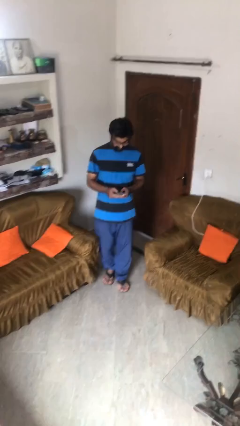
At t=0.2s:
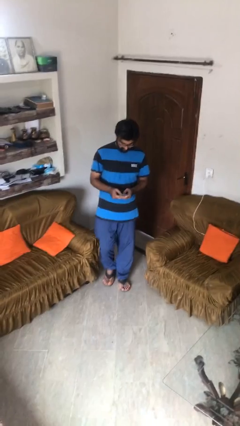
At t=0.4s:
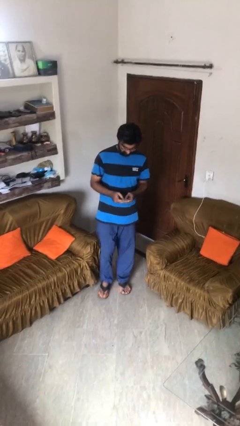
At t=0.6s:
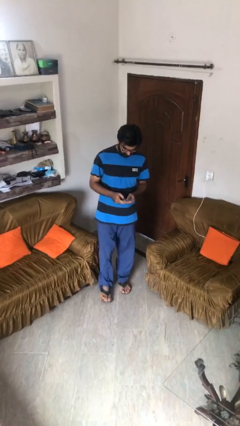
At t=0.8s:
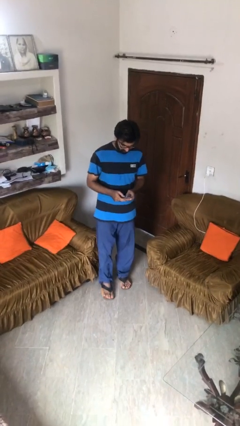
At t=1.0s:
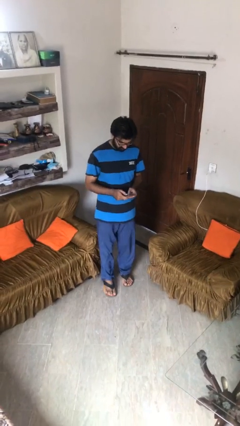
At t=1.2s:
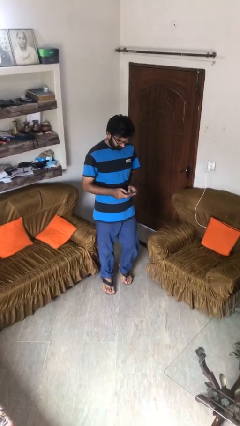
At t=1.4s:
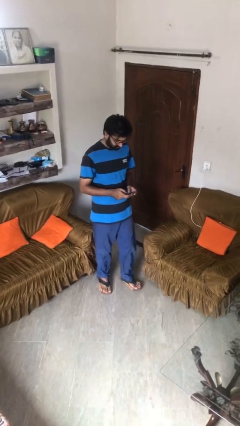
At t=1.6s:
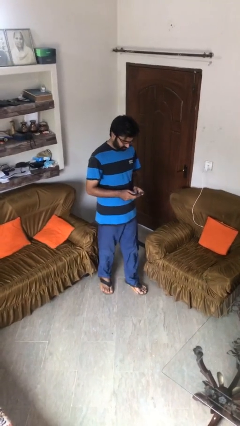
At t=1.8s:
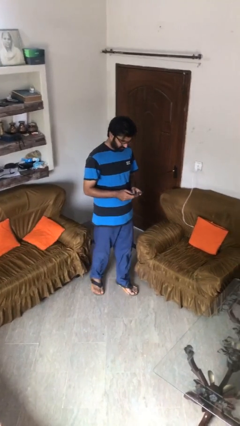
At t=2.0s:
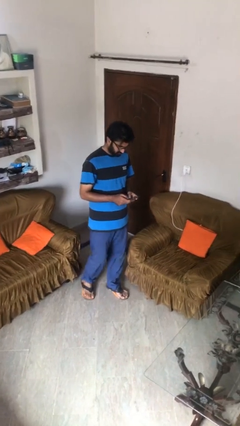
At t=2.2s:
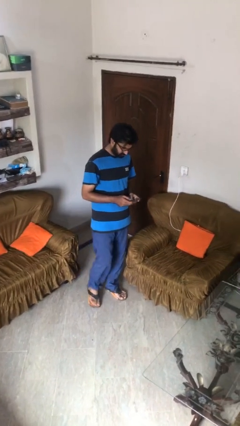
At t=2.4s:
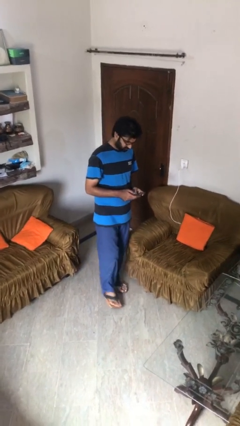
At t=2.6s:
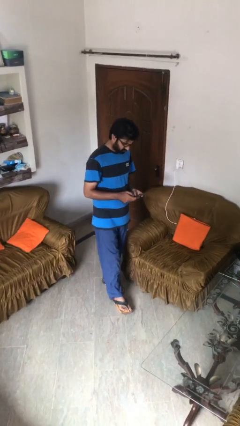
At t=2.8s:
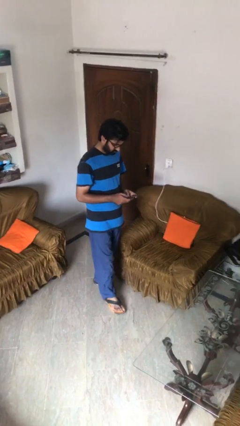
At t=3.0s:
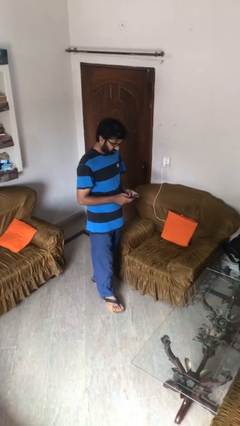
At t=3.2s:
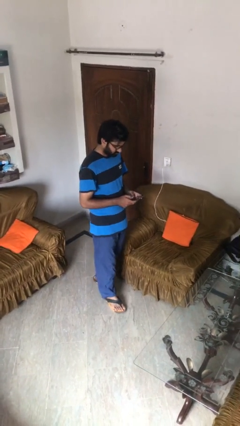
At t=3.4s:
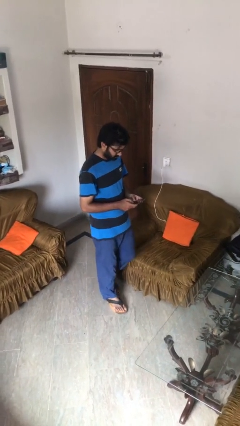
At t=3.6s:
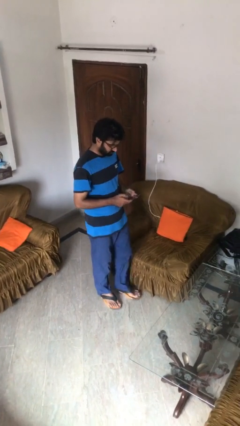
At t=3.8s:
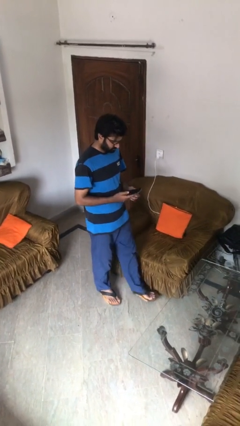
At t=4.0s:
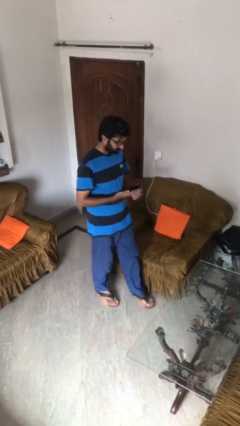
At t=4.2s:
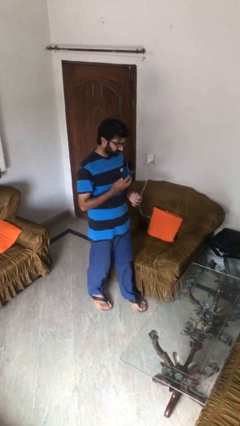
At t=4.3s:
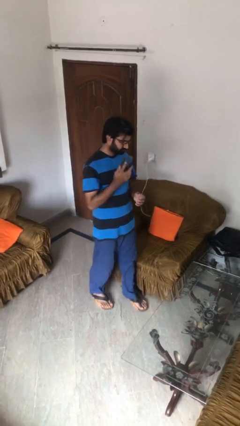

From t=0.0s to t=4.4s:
person texts on phone

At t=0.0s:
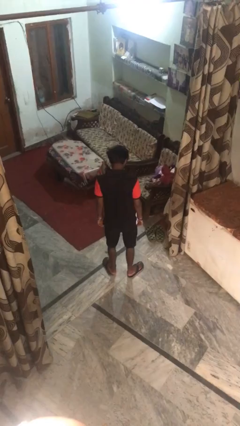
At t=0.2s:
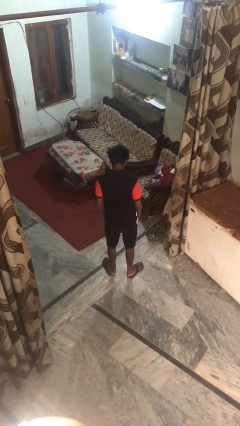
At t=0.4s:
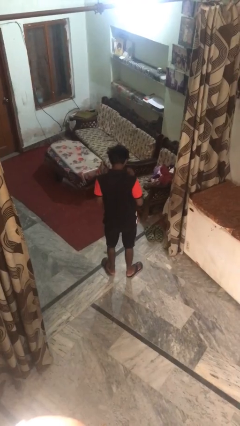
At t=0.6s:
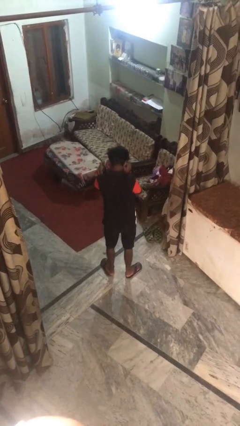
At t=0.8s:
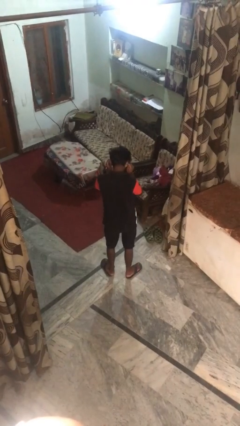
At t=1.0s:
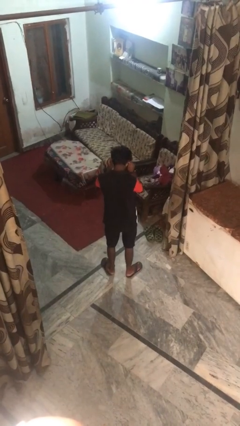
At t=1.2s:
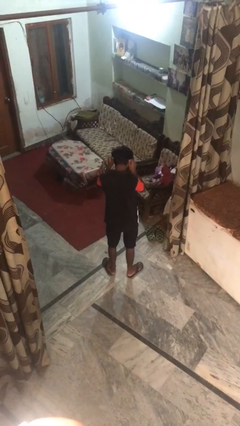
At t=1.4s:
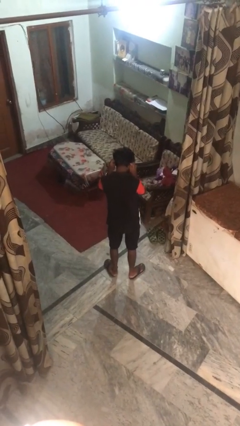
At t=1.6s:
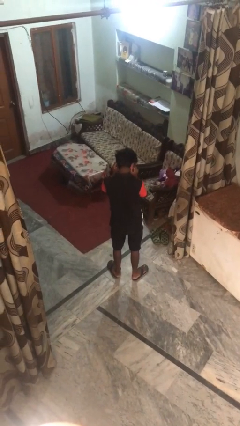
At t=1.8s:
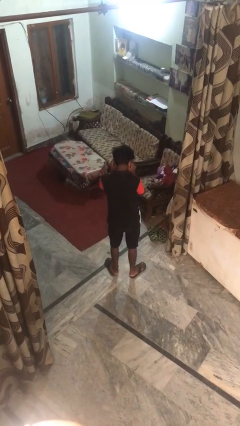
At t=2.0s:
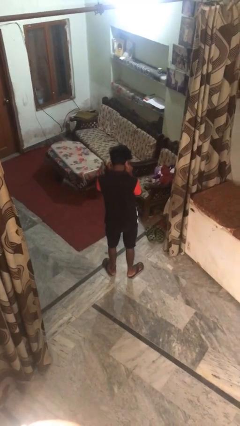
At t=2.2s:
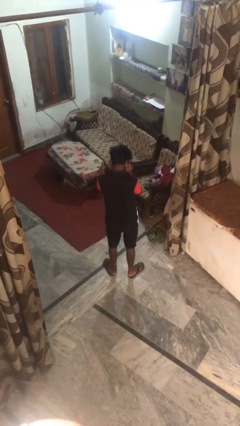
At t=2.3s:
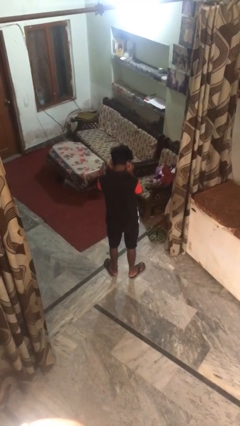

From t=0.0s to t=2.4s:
person touches earlobe

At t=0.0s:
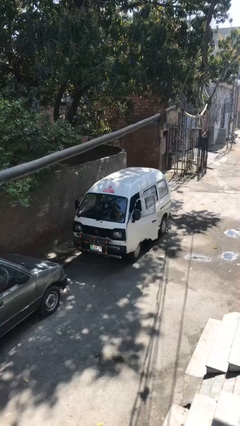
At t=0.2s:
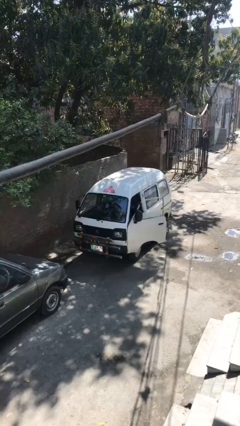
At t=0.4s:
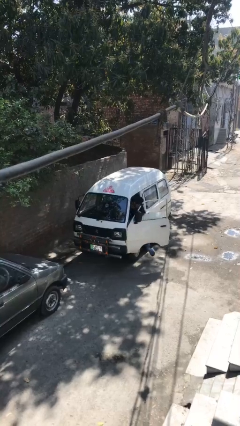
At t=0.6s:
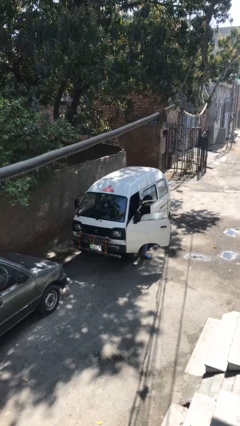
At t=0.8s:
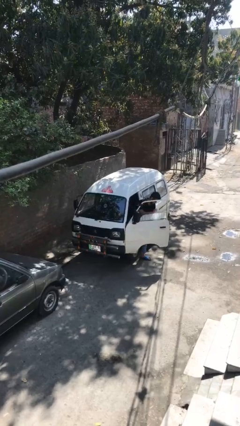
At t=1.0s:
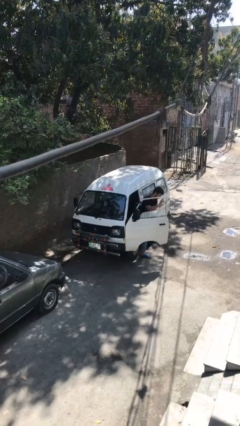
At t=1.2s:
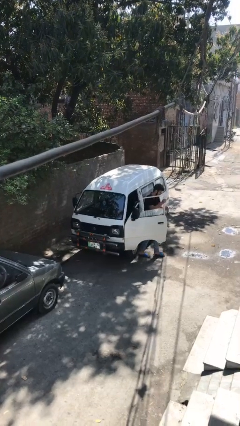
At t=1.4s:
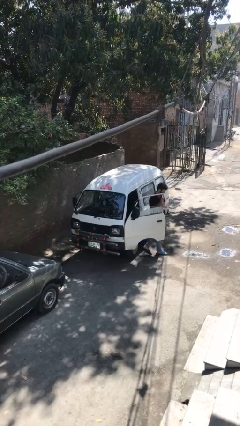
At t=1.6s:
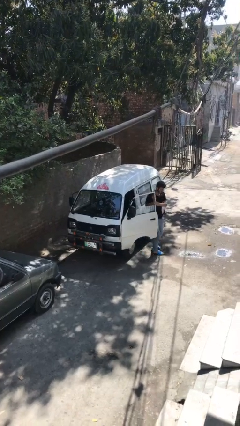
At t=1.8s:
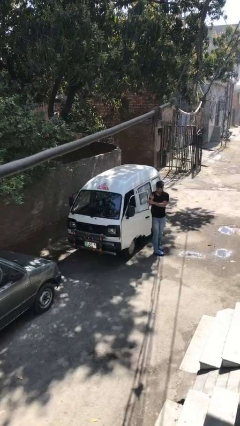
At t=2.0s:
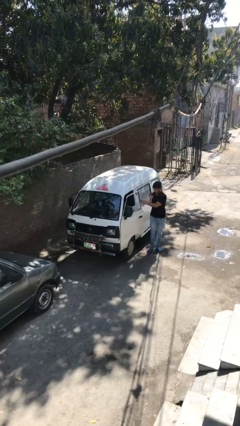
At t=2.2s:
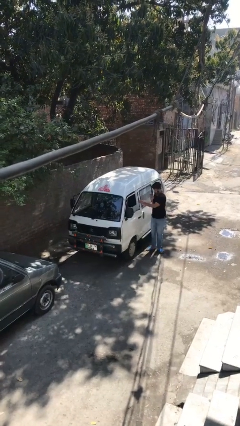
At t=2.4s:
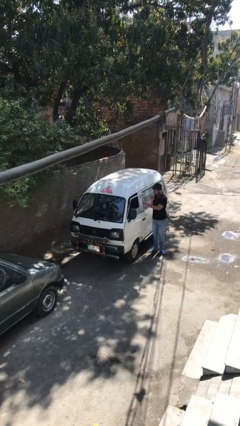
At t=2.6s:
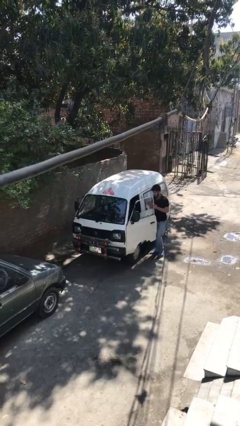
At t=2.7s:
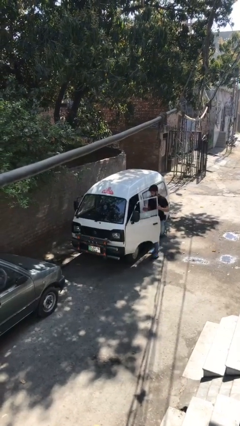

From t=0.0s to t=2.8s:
car drops off person

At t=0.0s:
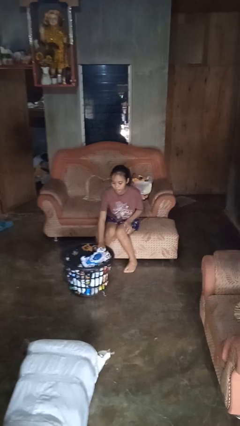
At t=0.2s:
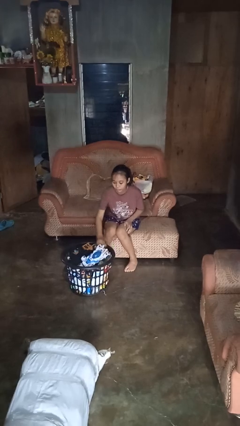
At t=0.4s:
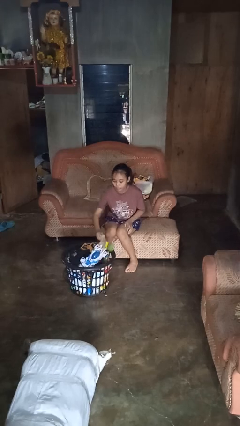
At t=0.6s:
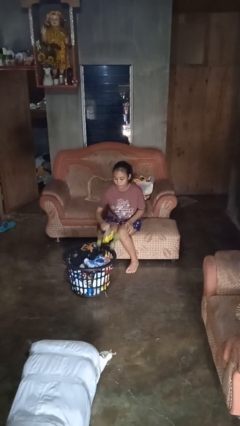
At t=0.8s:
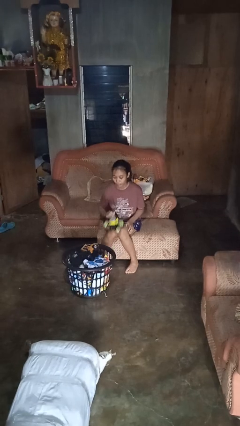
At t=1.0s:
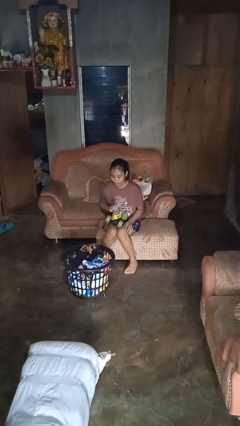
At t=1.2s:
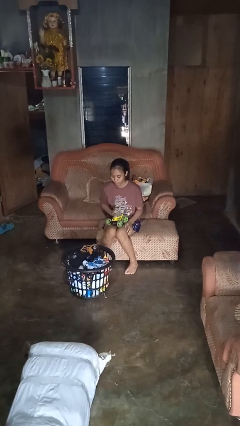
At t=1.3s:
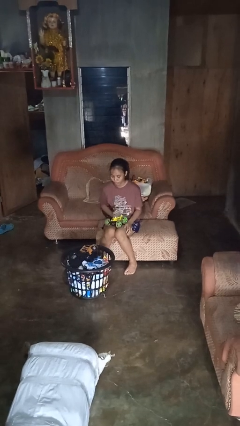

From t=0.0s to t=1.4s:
person takes object from basket

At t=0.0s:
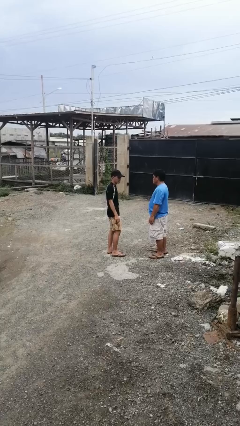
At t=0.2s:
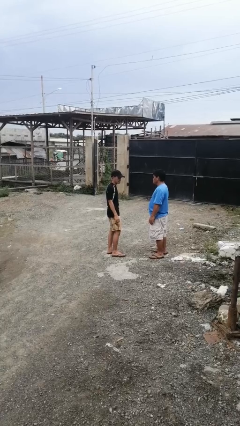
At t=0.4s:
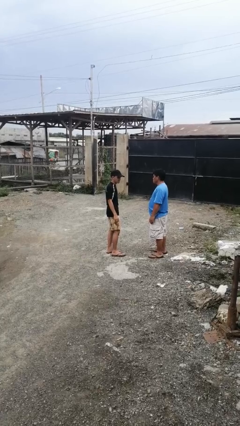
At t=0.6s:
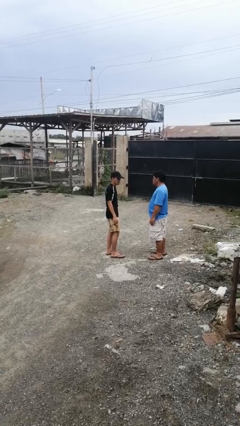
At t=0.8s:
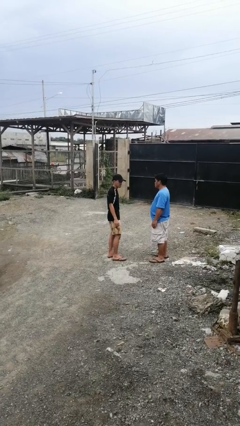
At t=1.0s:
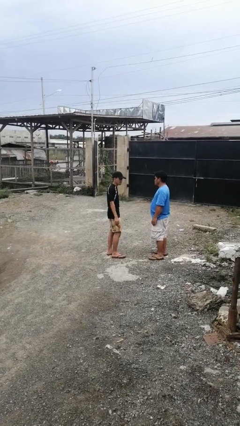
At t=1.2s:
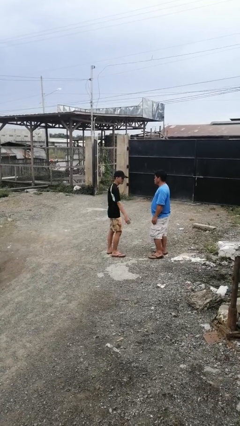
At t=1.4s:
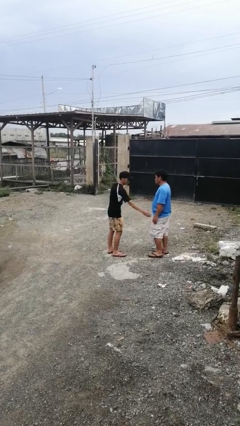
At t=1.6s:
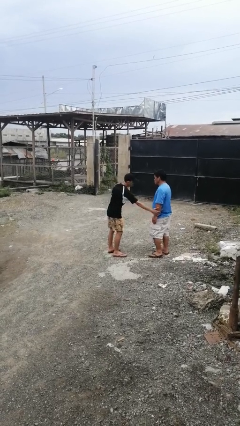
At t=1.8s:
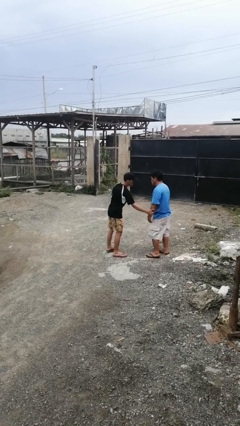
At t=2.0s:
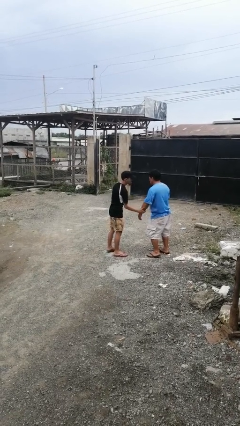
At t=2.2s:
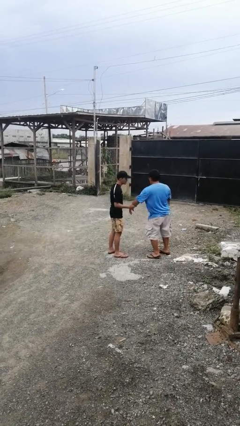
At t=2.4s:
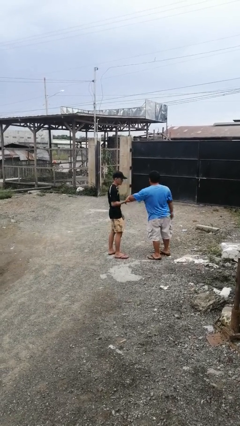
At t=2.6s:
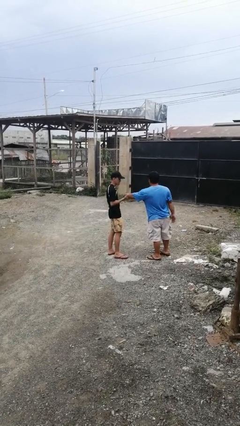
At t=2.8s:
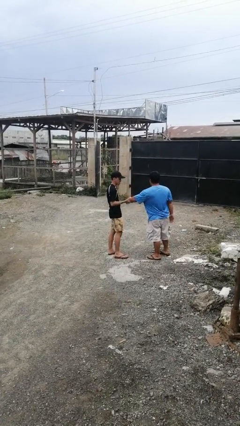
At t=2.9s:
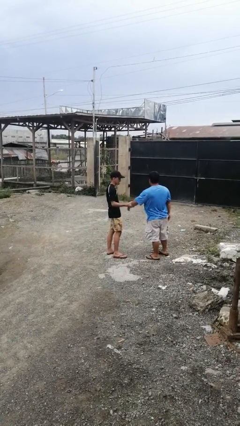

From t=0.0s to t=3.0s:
person grabs person by forearm

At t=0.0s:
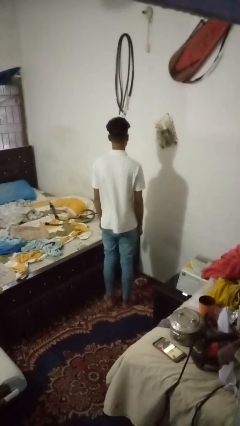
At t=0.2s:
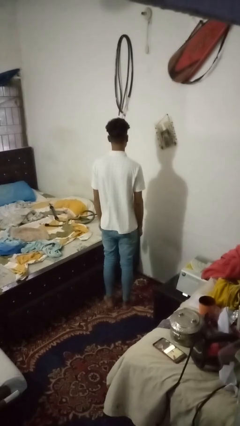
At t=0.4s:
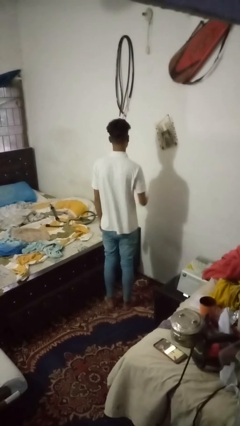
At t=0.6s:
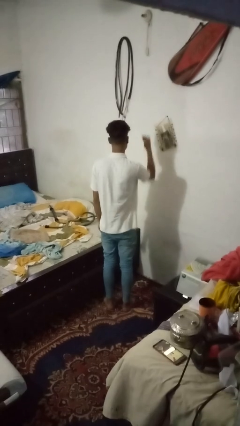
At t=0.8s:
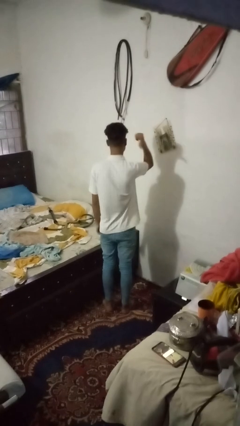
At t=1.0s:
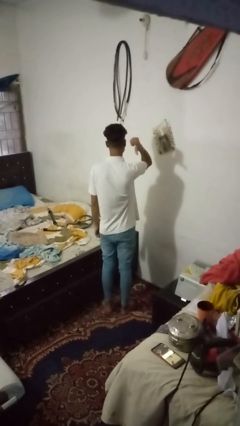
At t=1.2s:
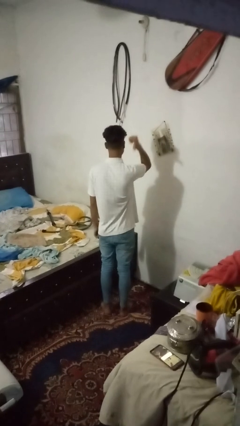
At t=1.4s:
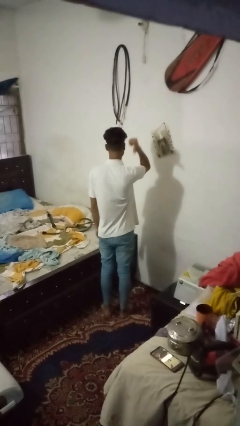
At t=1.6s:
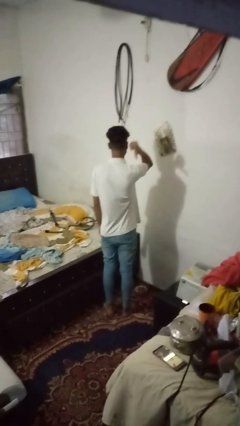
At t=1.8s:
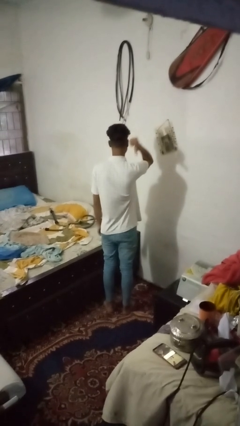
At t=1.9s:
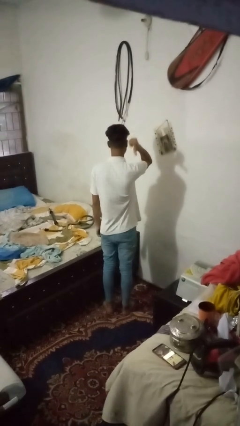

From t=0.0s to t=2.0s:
person gestures behind me

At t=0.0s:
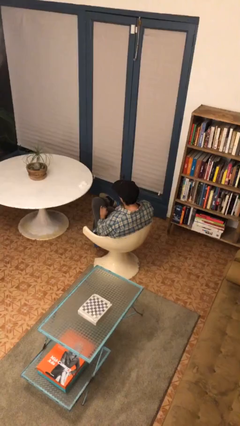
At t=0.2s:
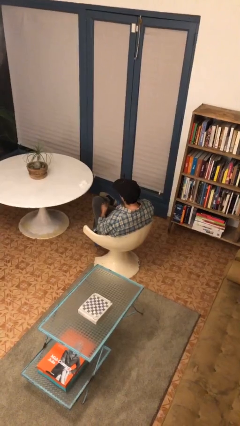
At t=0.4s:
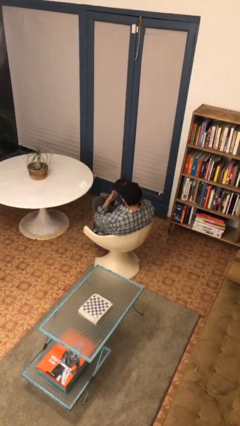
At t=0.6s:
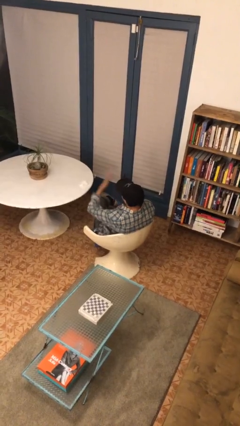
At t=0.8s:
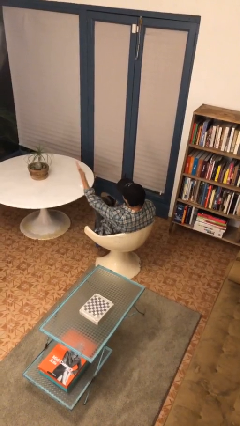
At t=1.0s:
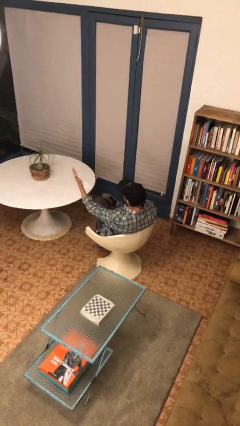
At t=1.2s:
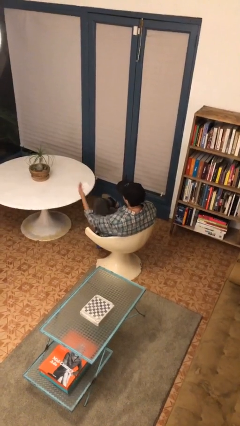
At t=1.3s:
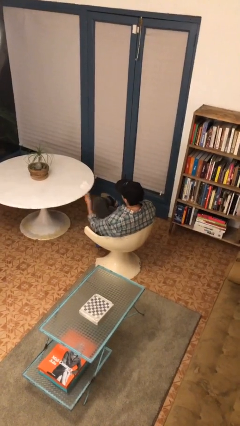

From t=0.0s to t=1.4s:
person gestures blow kiss
